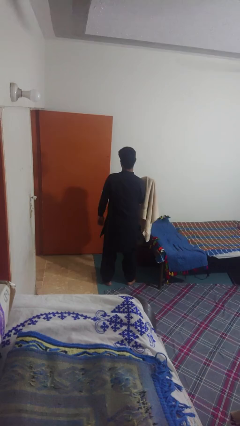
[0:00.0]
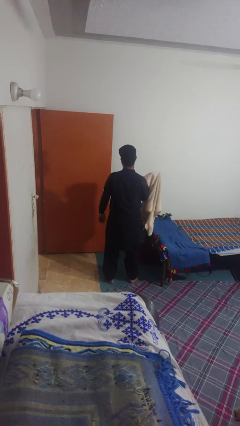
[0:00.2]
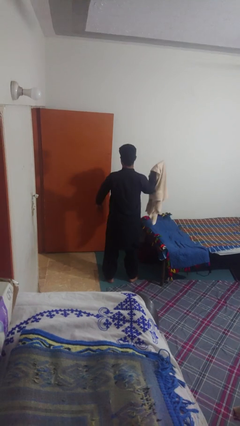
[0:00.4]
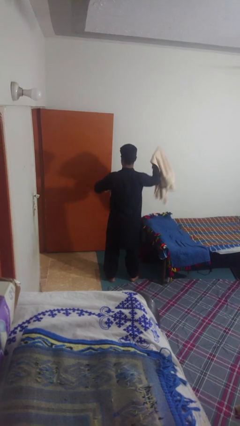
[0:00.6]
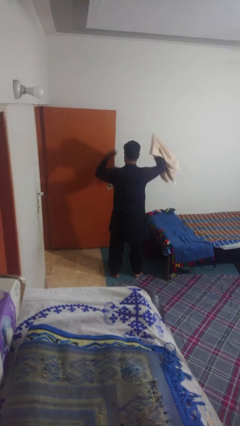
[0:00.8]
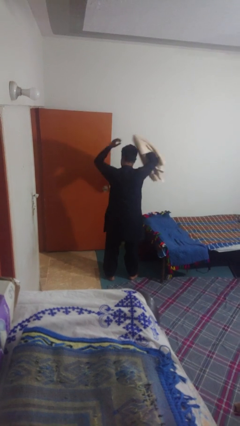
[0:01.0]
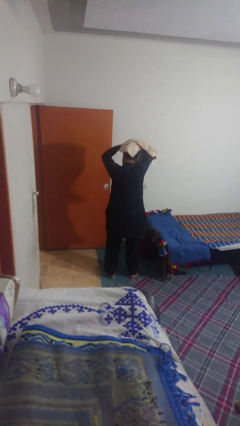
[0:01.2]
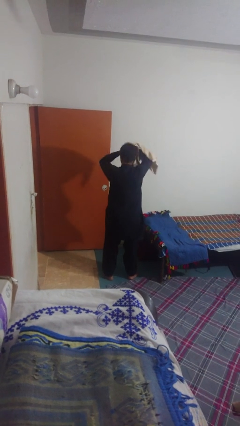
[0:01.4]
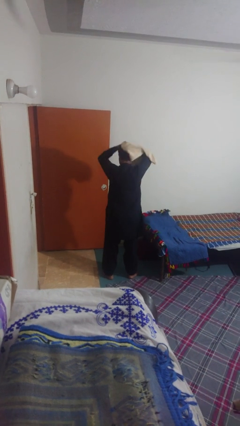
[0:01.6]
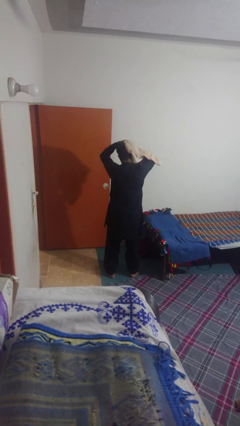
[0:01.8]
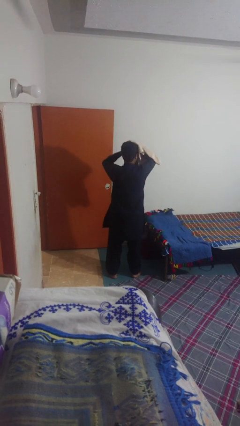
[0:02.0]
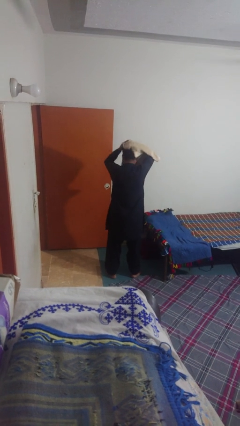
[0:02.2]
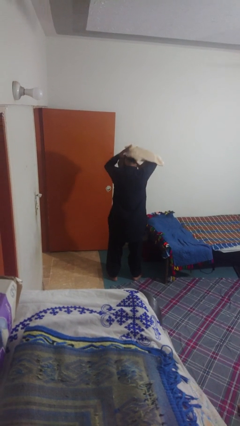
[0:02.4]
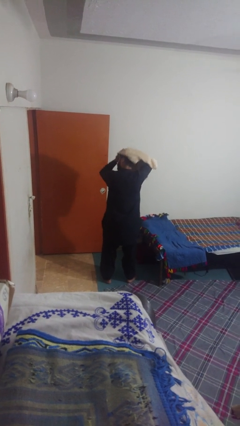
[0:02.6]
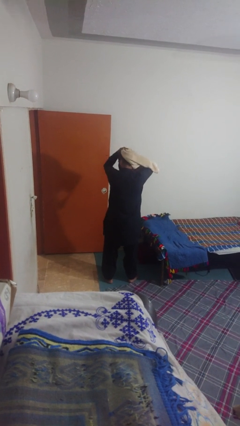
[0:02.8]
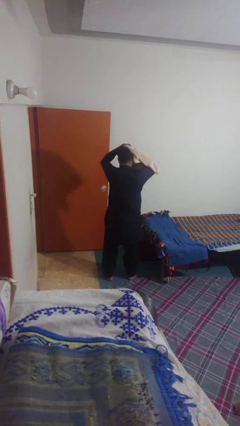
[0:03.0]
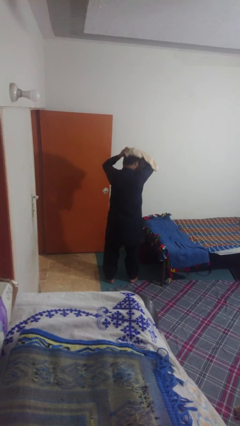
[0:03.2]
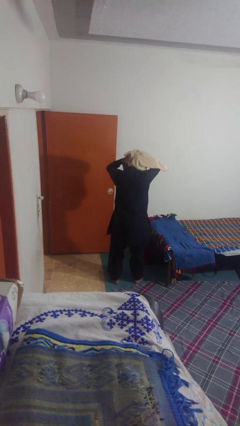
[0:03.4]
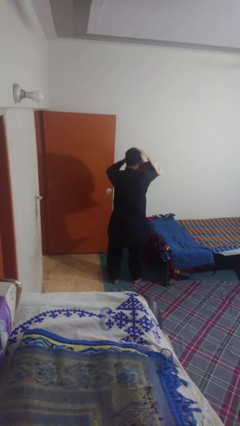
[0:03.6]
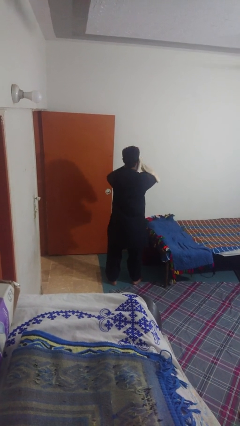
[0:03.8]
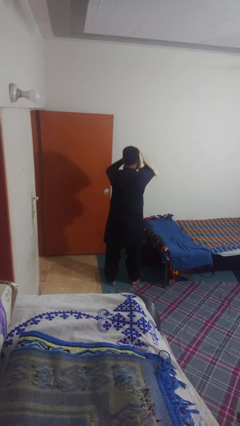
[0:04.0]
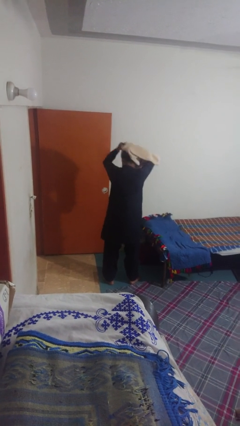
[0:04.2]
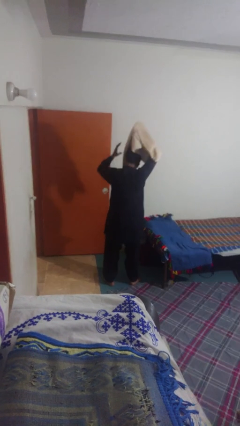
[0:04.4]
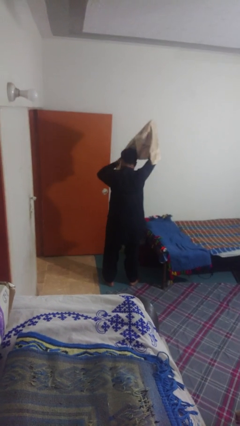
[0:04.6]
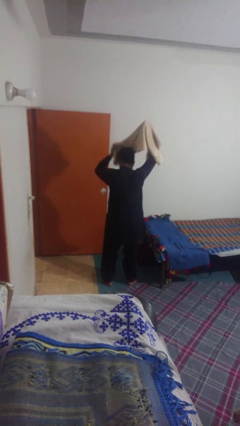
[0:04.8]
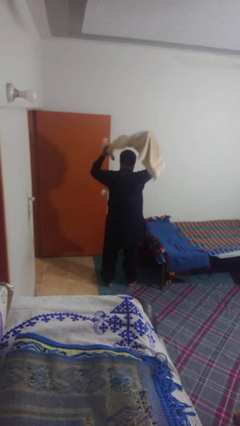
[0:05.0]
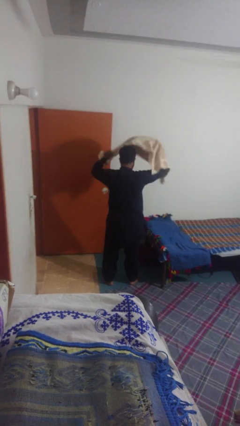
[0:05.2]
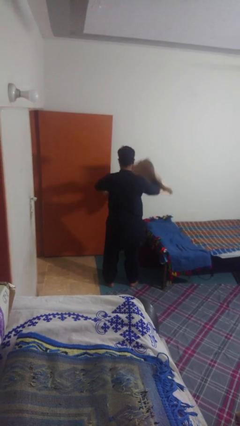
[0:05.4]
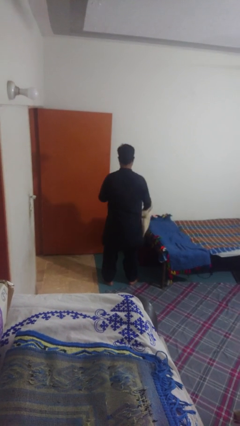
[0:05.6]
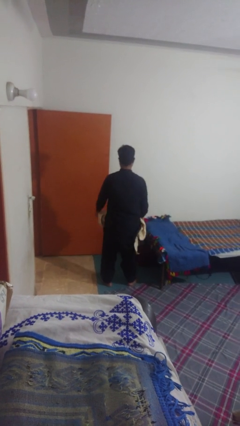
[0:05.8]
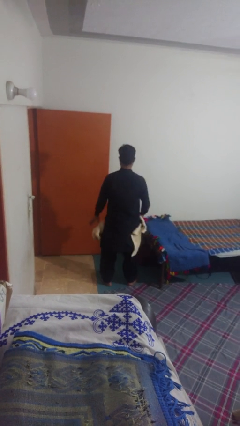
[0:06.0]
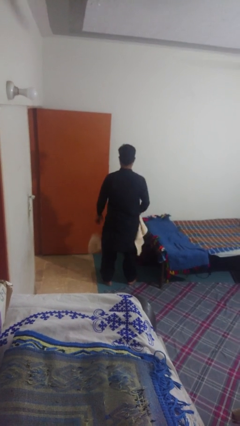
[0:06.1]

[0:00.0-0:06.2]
person dries hair with towel

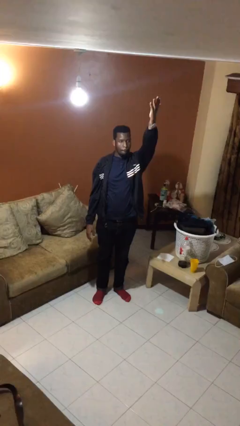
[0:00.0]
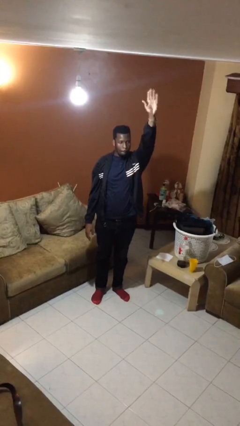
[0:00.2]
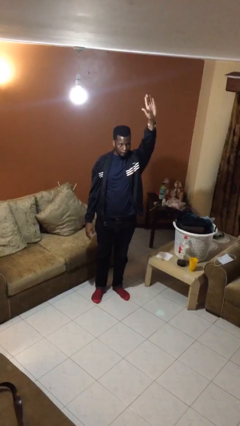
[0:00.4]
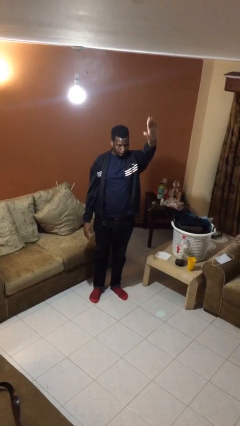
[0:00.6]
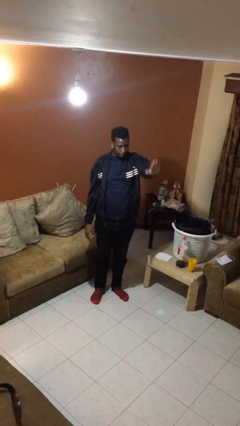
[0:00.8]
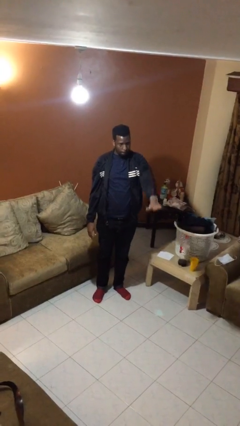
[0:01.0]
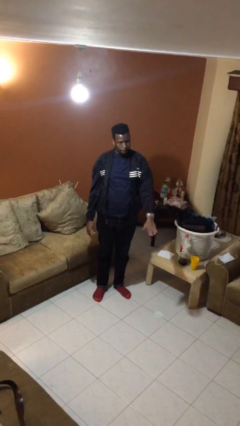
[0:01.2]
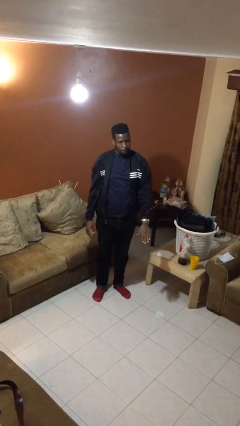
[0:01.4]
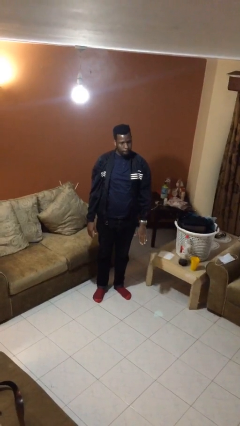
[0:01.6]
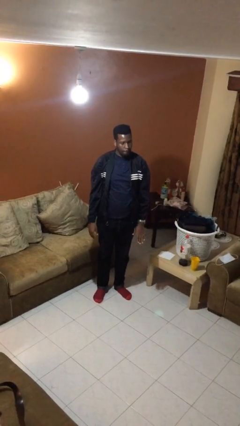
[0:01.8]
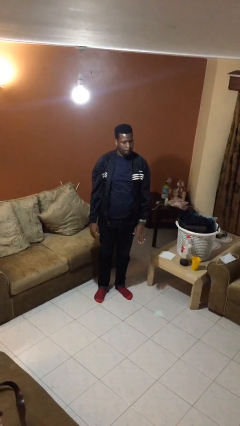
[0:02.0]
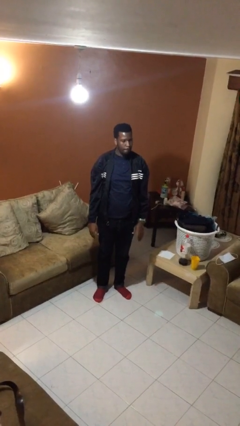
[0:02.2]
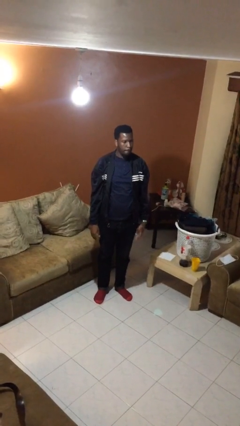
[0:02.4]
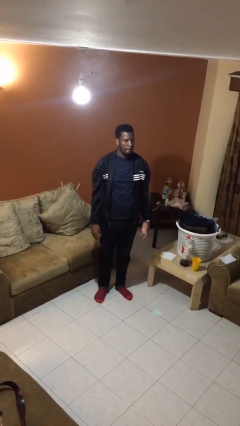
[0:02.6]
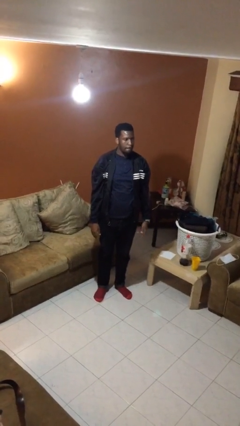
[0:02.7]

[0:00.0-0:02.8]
person gestures swipe down

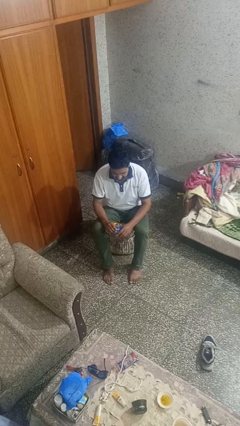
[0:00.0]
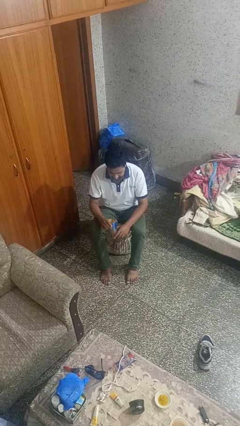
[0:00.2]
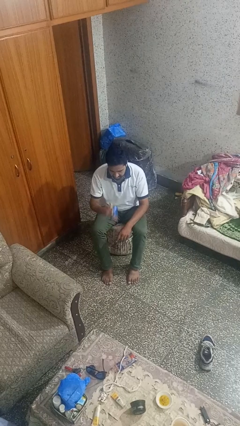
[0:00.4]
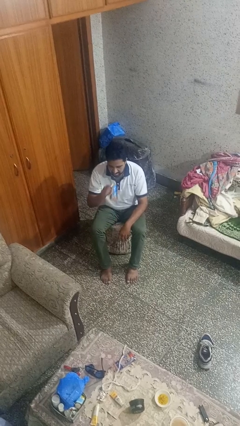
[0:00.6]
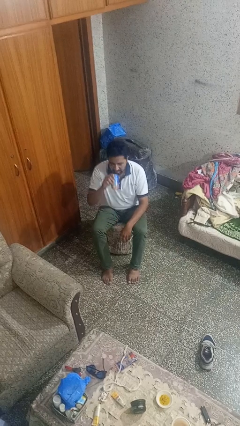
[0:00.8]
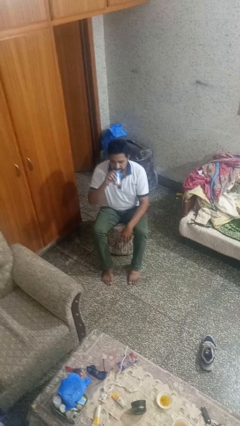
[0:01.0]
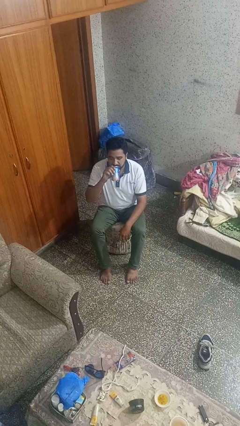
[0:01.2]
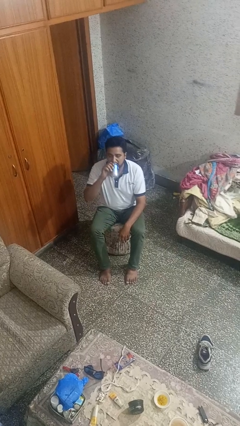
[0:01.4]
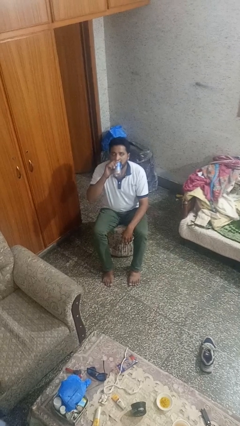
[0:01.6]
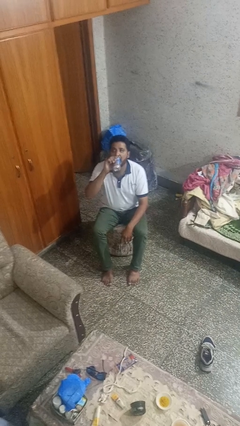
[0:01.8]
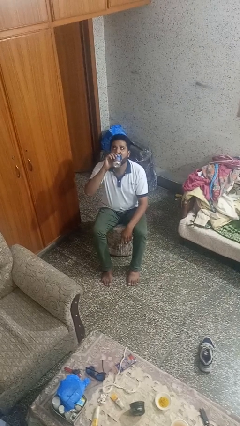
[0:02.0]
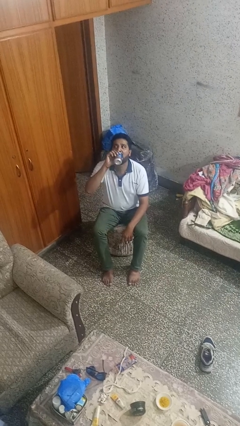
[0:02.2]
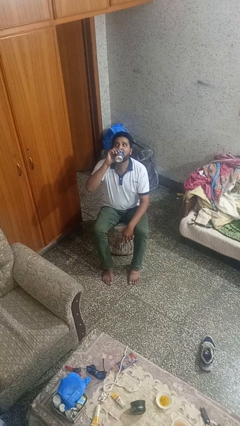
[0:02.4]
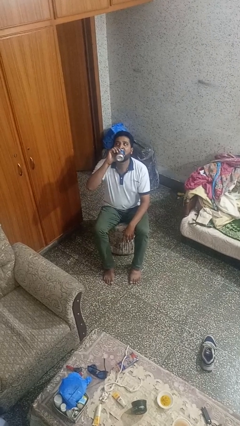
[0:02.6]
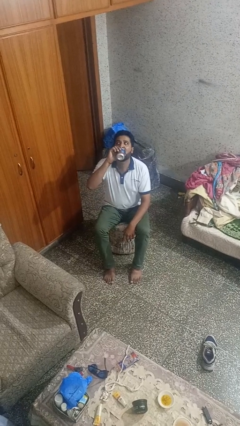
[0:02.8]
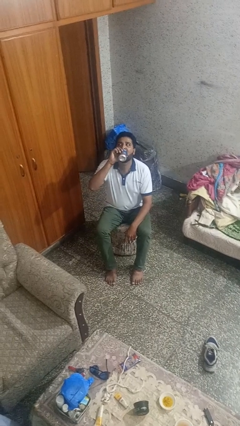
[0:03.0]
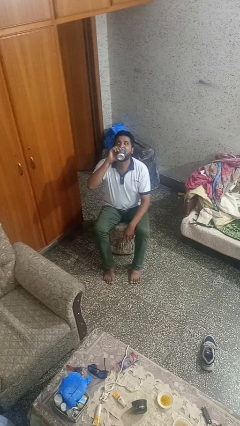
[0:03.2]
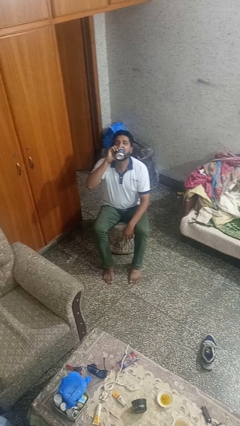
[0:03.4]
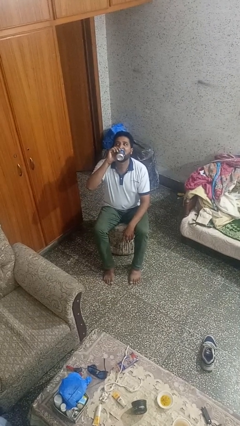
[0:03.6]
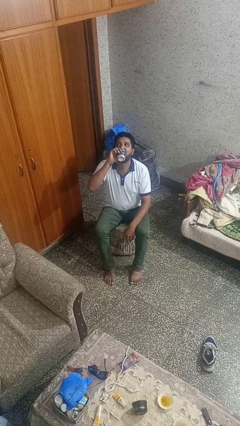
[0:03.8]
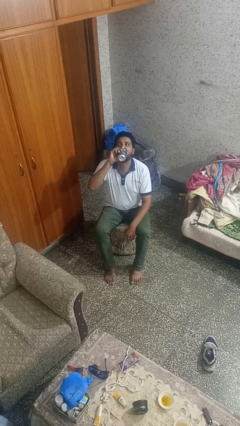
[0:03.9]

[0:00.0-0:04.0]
person drinks from beverage can

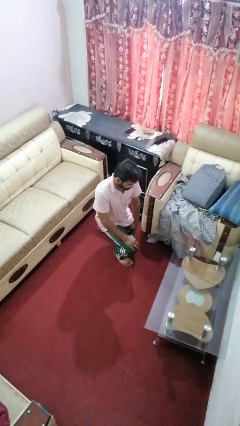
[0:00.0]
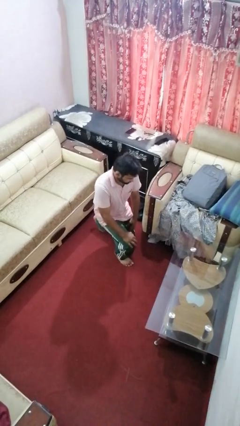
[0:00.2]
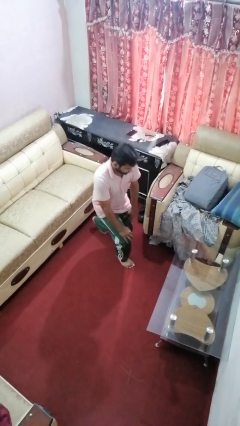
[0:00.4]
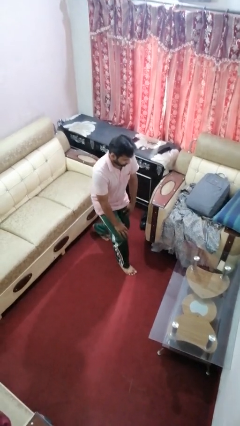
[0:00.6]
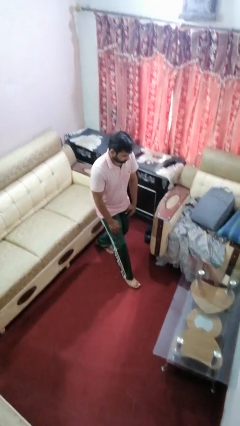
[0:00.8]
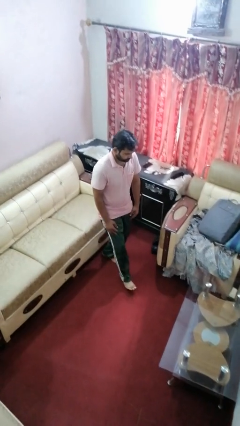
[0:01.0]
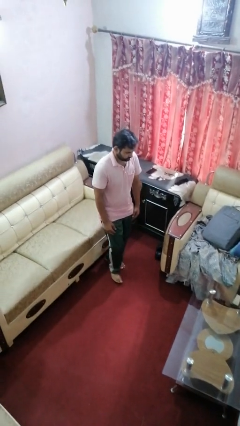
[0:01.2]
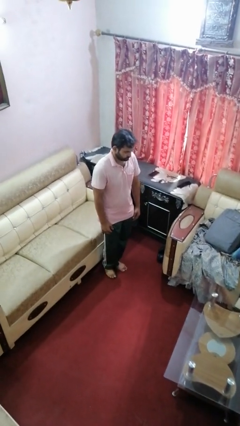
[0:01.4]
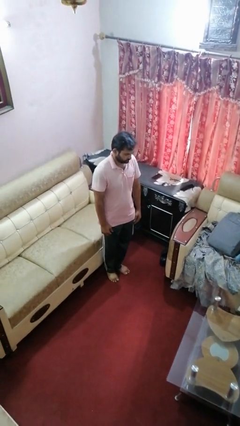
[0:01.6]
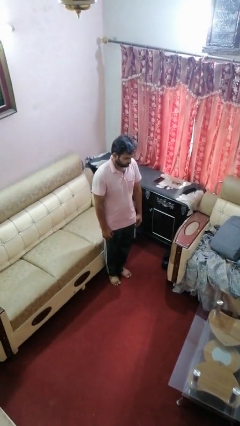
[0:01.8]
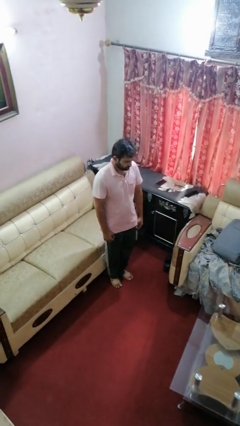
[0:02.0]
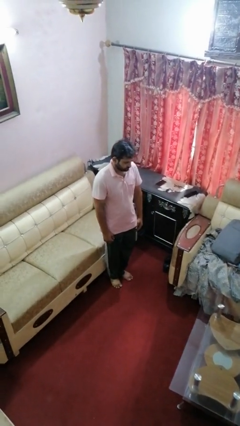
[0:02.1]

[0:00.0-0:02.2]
person stands up from floor

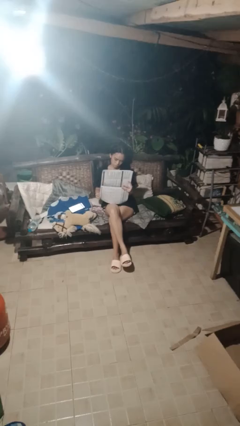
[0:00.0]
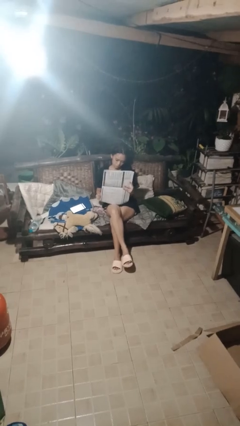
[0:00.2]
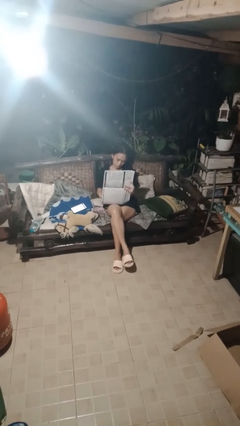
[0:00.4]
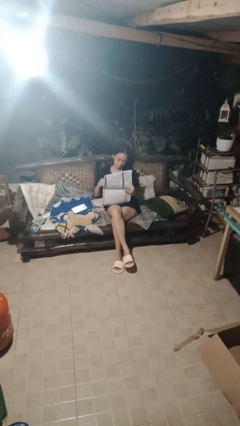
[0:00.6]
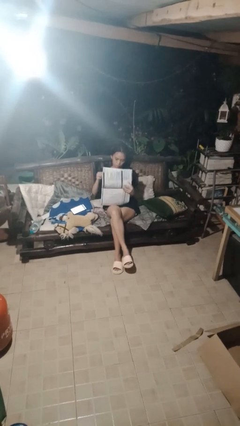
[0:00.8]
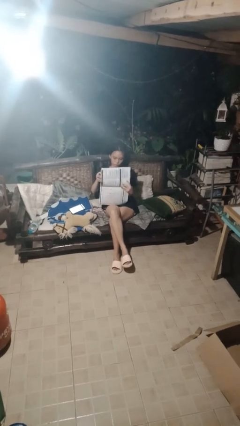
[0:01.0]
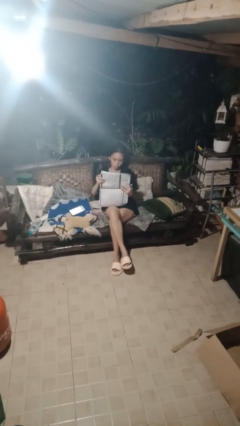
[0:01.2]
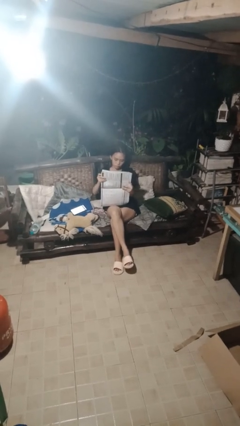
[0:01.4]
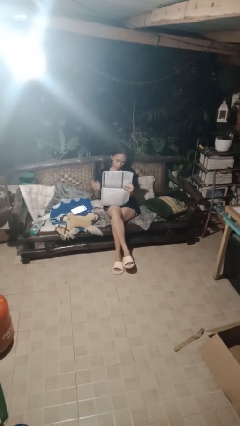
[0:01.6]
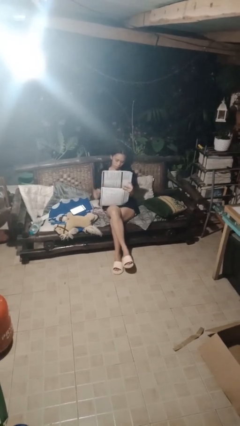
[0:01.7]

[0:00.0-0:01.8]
person reads newspaper

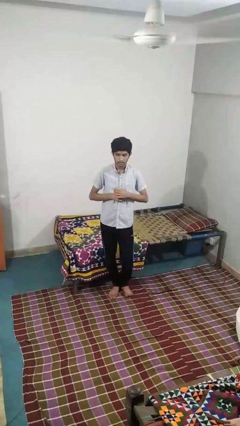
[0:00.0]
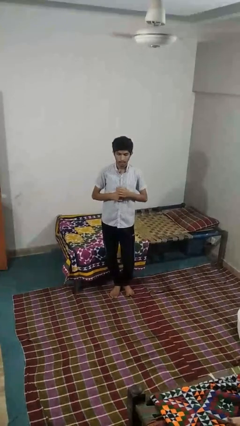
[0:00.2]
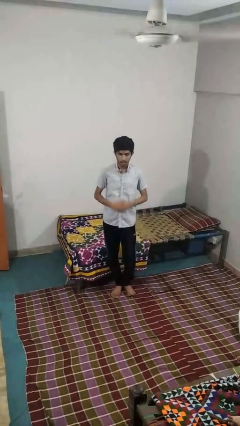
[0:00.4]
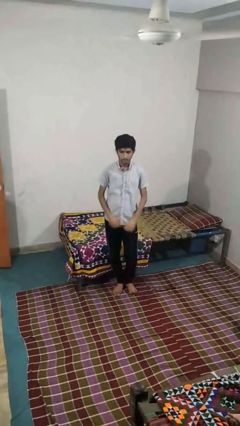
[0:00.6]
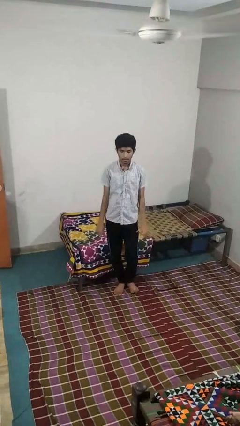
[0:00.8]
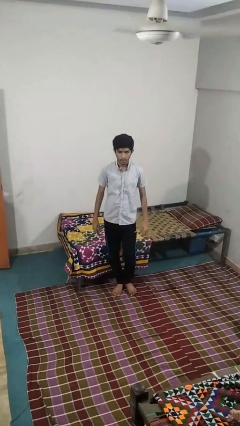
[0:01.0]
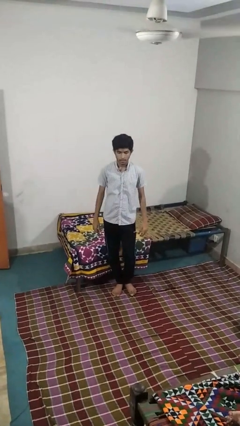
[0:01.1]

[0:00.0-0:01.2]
person buttons shirt
